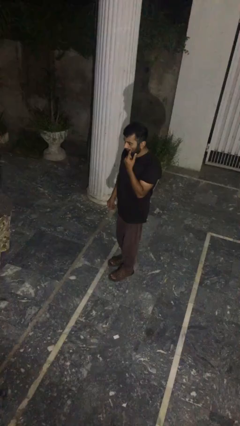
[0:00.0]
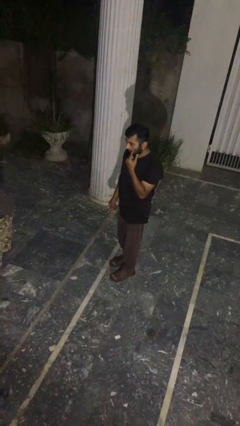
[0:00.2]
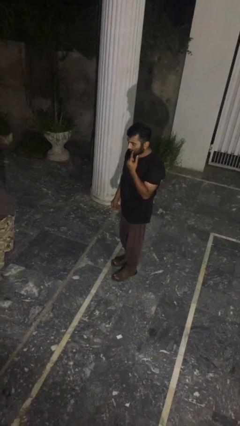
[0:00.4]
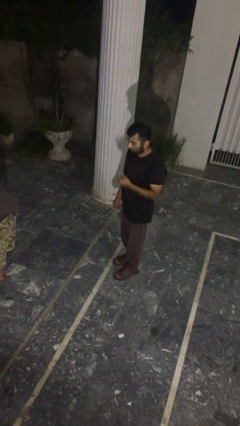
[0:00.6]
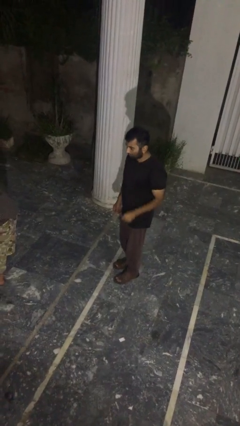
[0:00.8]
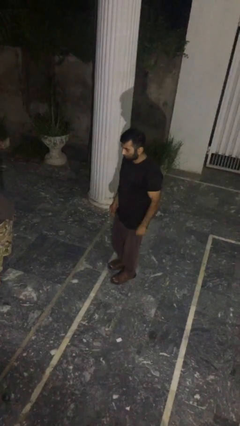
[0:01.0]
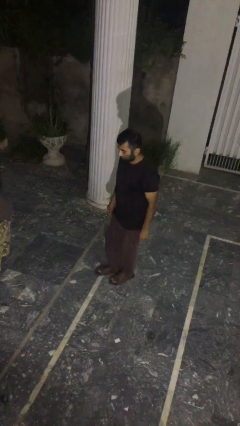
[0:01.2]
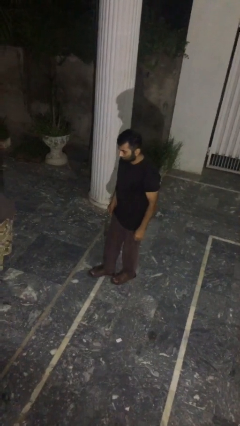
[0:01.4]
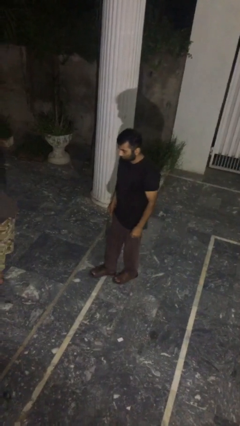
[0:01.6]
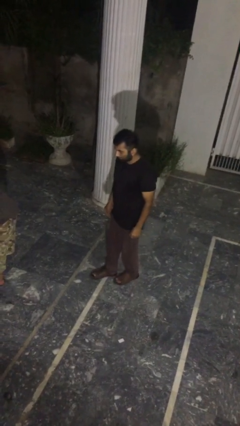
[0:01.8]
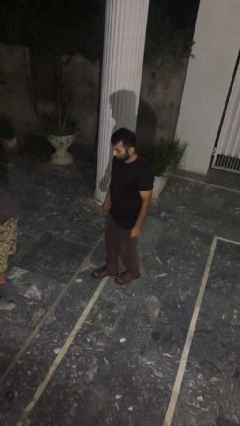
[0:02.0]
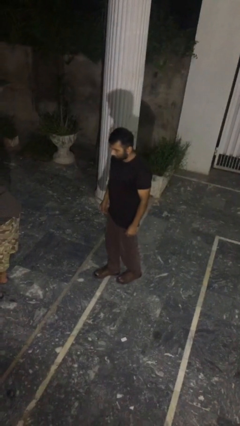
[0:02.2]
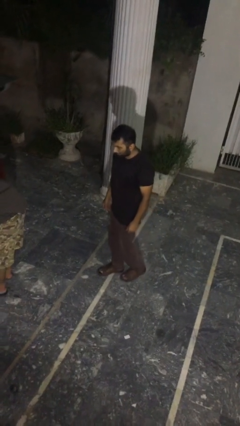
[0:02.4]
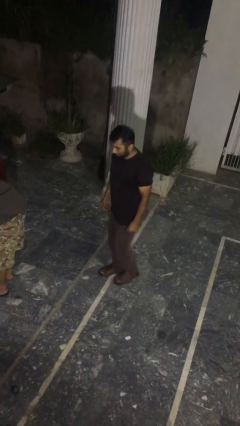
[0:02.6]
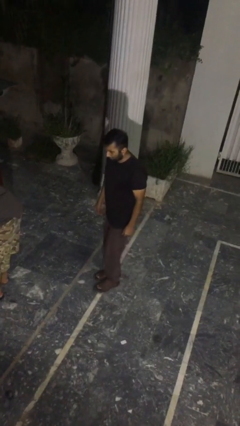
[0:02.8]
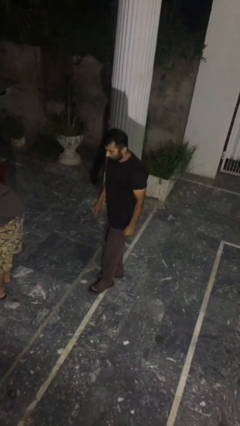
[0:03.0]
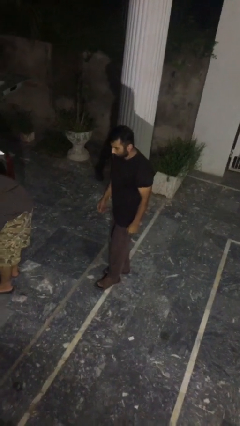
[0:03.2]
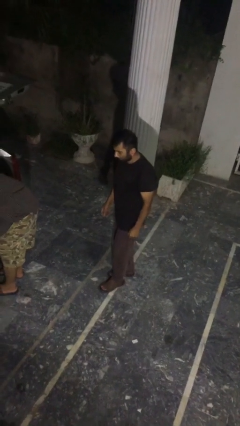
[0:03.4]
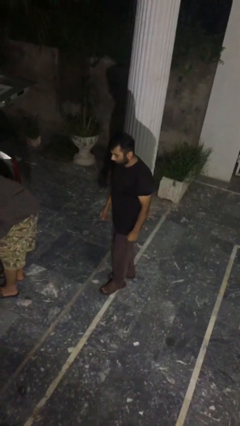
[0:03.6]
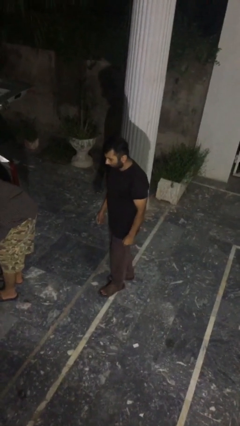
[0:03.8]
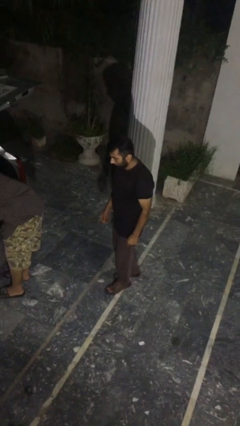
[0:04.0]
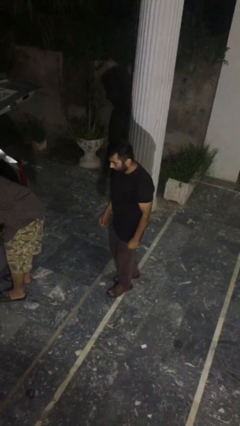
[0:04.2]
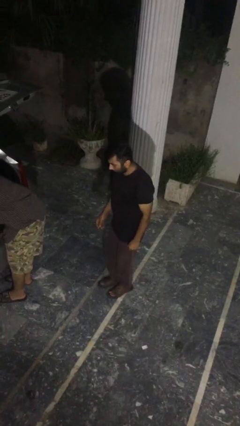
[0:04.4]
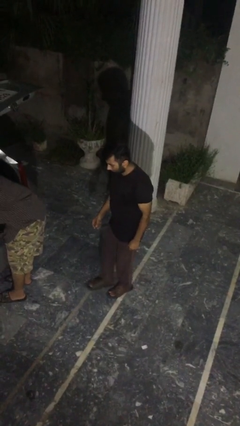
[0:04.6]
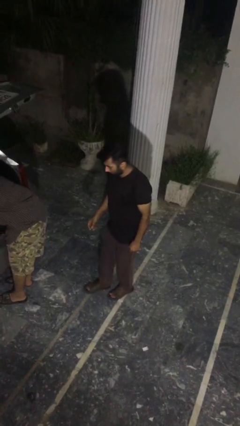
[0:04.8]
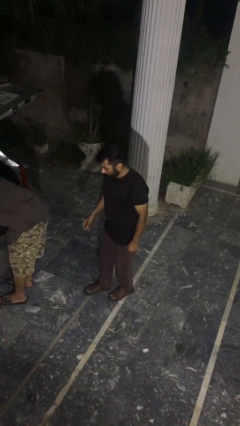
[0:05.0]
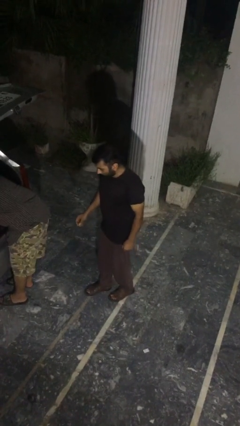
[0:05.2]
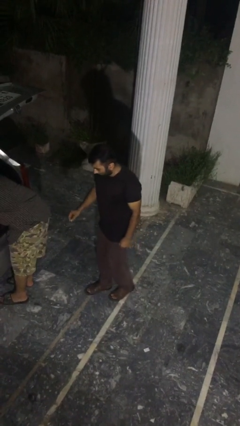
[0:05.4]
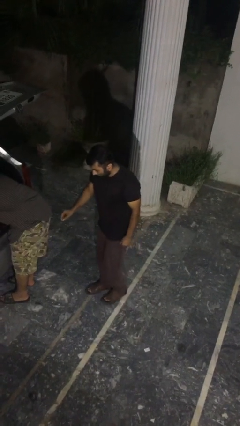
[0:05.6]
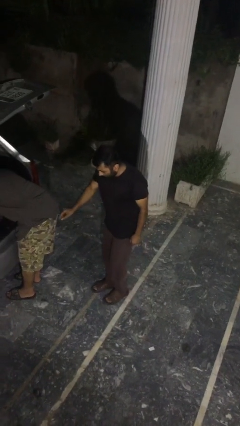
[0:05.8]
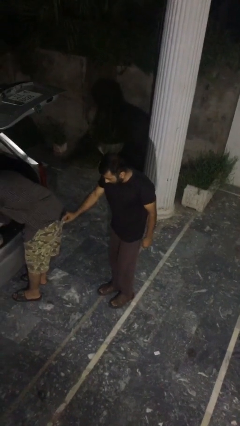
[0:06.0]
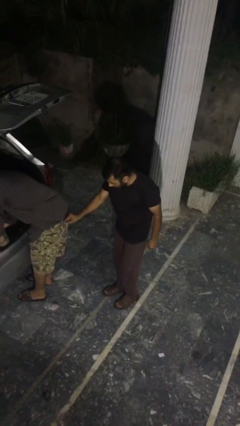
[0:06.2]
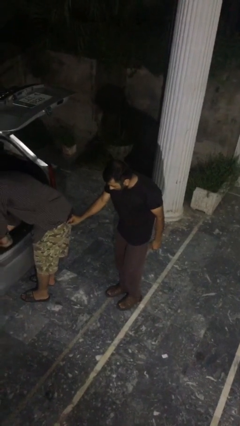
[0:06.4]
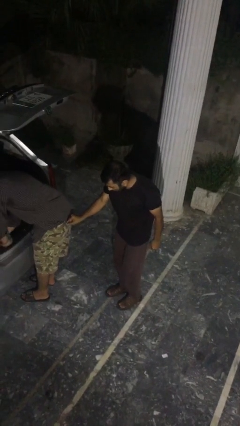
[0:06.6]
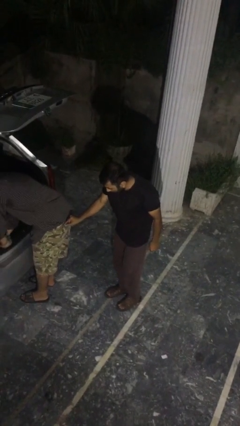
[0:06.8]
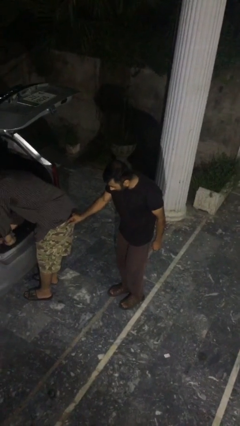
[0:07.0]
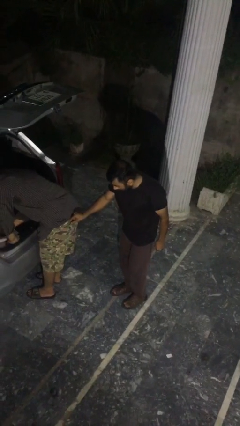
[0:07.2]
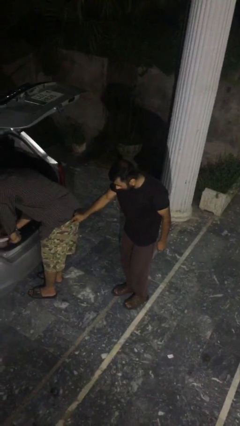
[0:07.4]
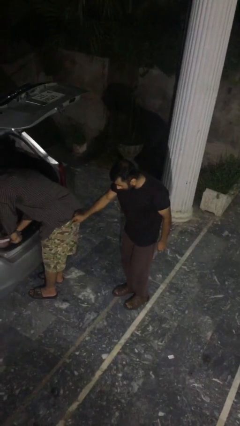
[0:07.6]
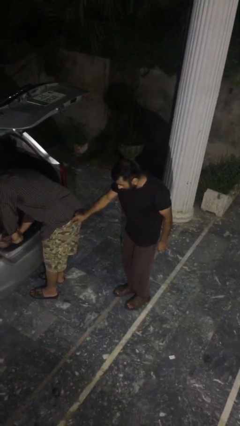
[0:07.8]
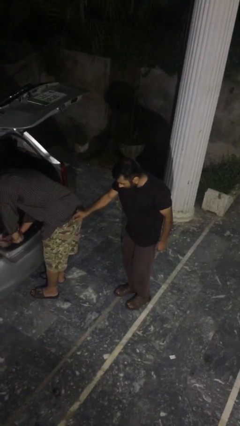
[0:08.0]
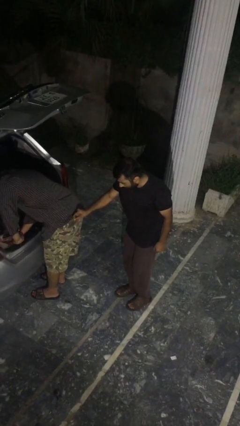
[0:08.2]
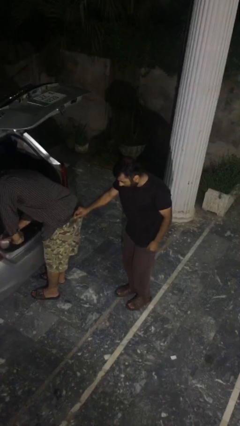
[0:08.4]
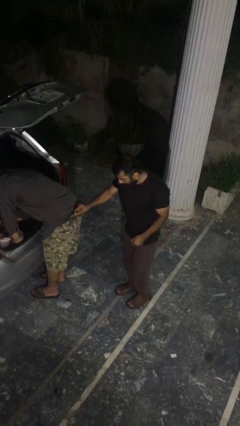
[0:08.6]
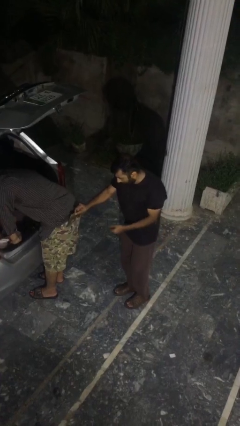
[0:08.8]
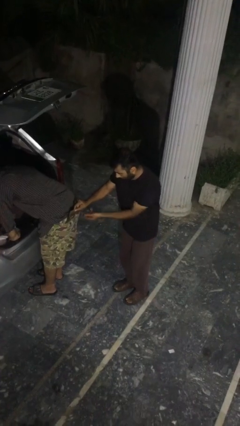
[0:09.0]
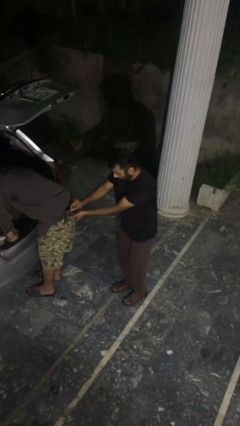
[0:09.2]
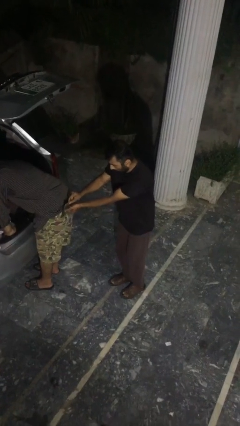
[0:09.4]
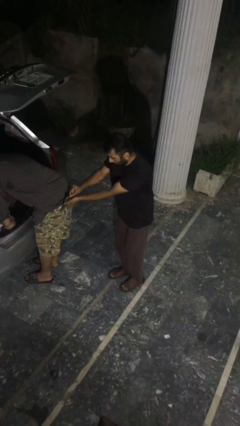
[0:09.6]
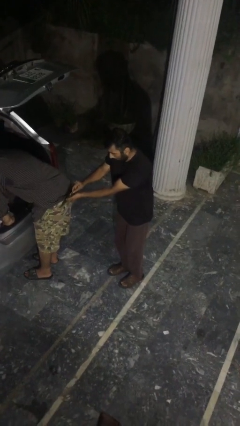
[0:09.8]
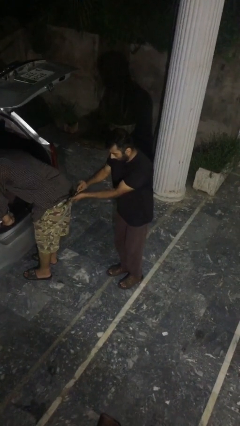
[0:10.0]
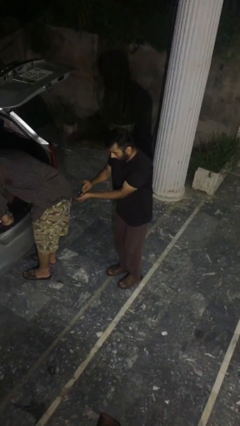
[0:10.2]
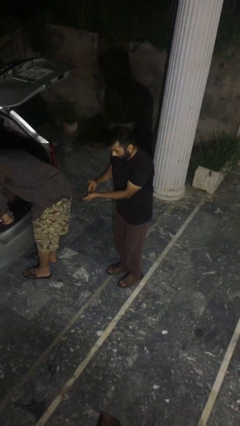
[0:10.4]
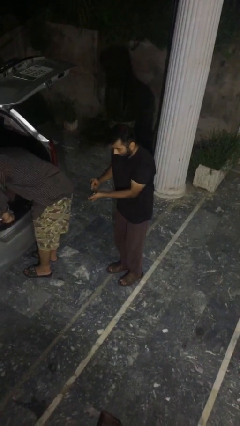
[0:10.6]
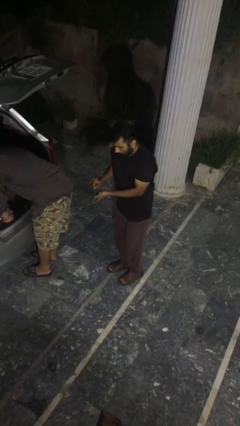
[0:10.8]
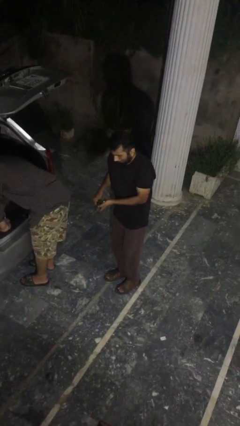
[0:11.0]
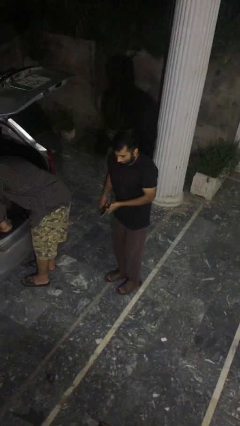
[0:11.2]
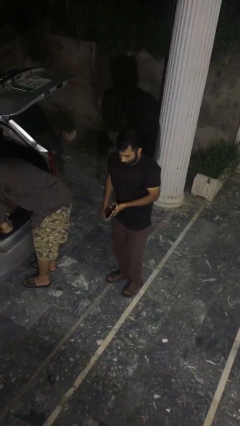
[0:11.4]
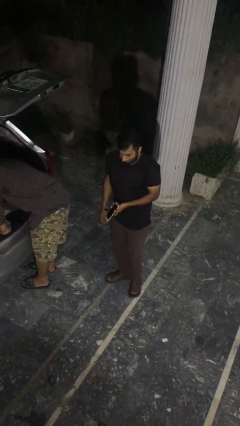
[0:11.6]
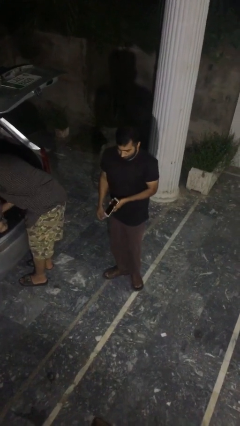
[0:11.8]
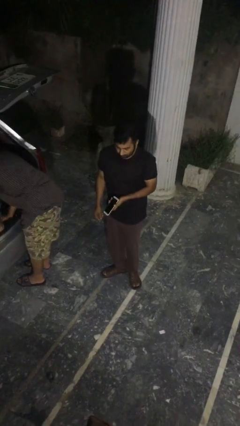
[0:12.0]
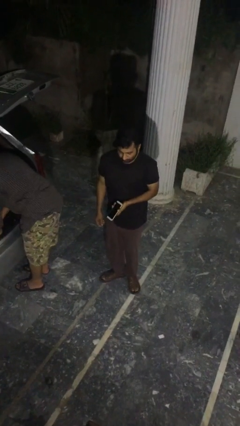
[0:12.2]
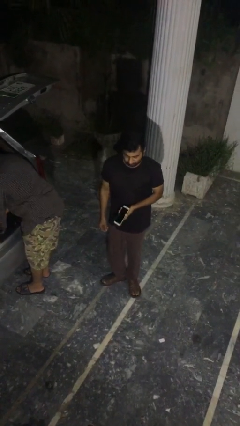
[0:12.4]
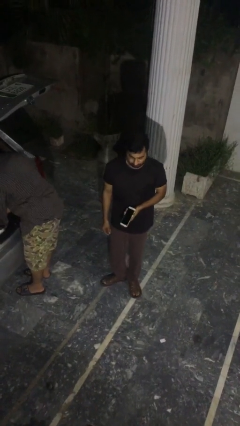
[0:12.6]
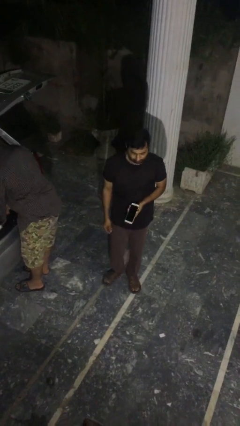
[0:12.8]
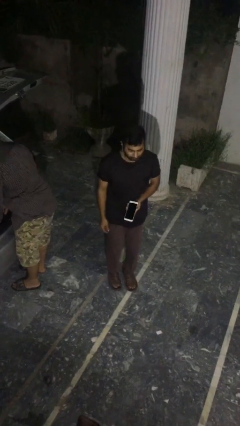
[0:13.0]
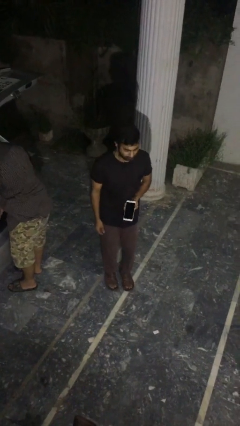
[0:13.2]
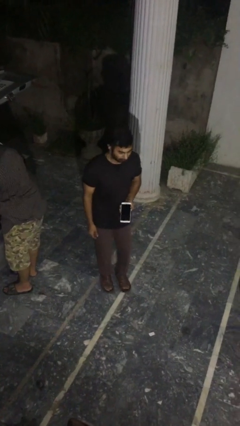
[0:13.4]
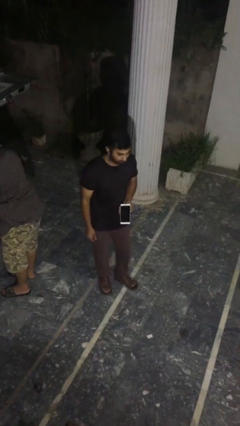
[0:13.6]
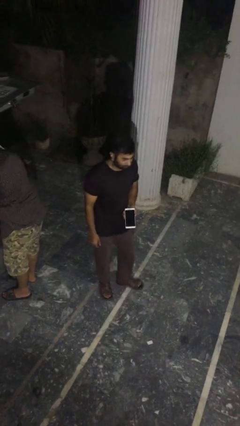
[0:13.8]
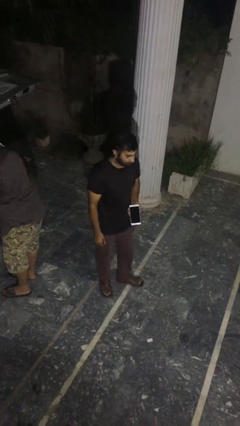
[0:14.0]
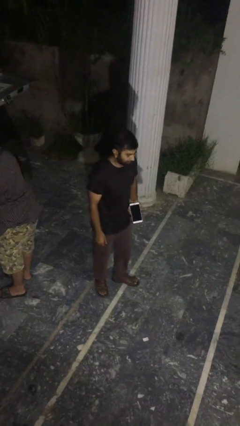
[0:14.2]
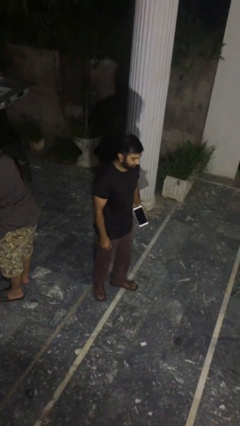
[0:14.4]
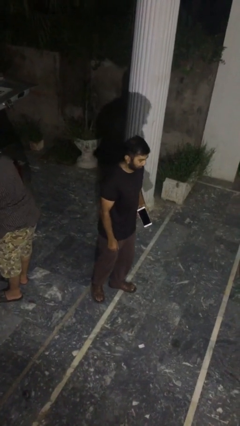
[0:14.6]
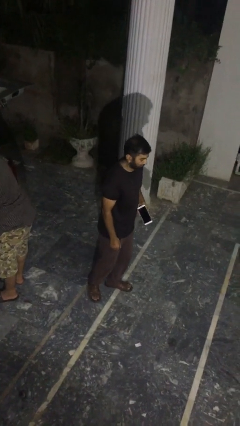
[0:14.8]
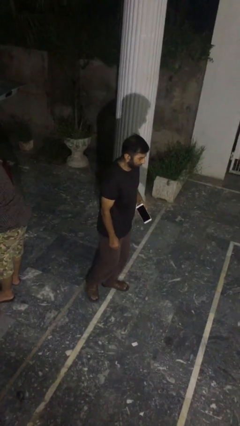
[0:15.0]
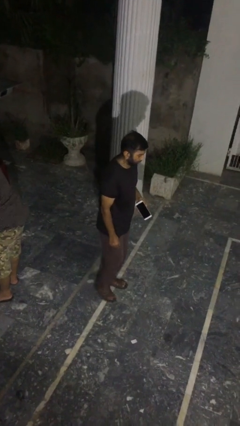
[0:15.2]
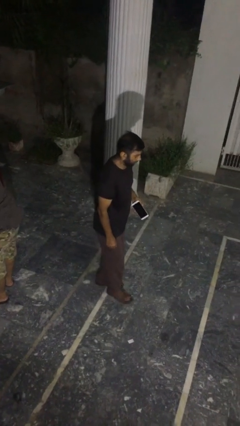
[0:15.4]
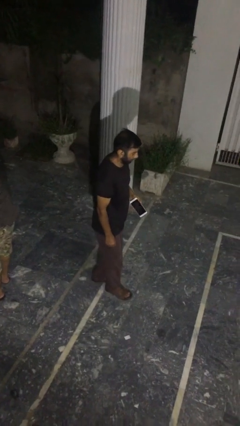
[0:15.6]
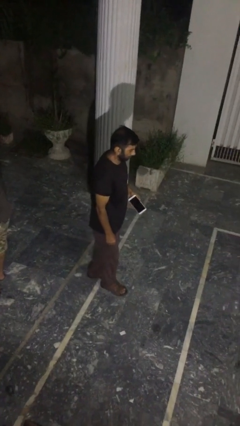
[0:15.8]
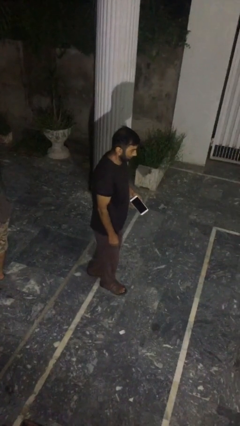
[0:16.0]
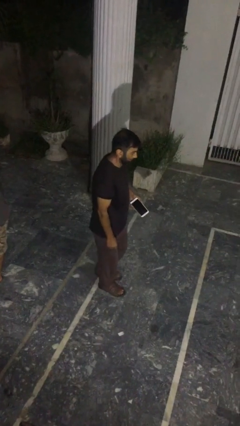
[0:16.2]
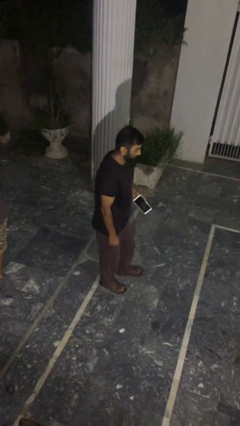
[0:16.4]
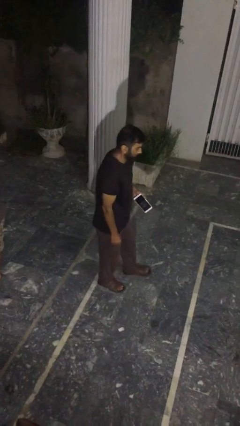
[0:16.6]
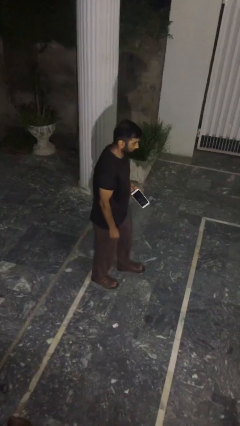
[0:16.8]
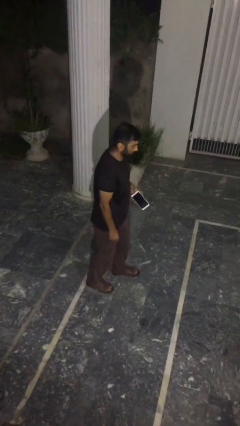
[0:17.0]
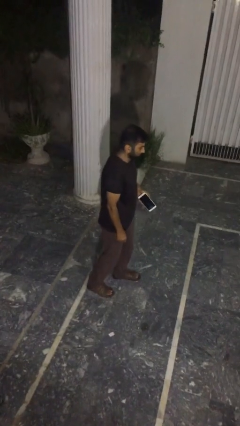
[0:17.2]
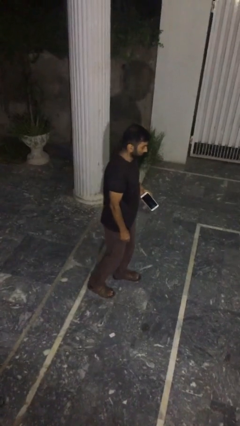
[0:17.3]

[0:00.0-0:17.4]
person steals object from person

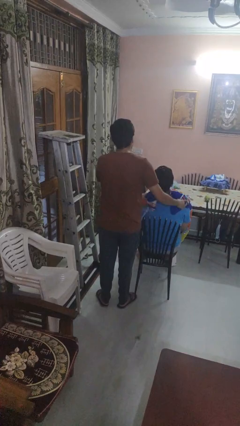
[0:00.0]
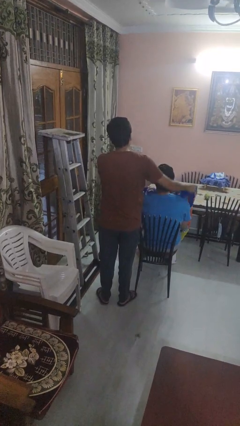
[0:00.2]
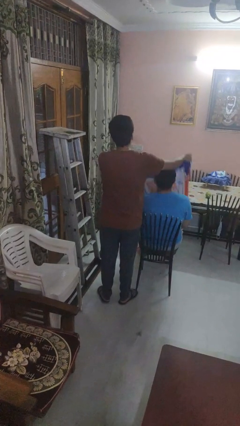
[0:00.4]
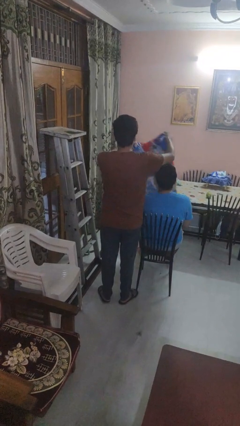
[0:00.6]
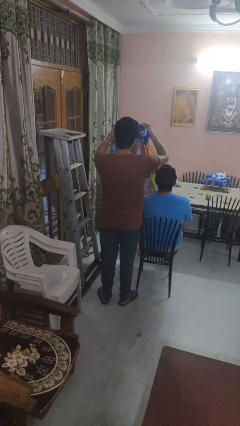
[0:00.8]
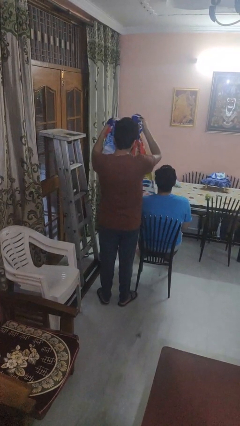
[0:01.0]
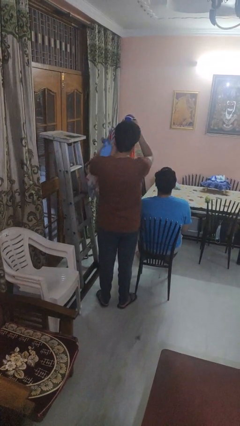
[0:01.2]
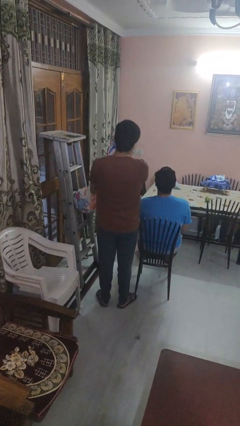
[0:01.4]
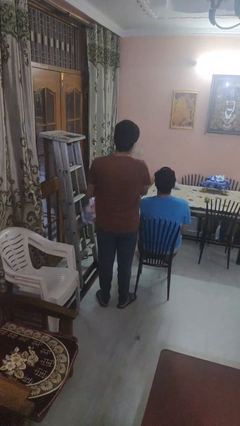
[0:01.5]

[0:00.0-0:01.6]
person uncovers friend with blanket
